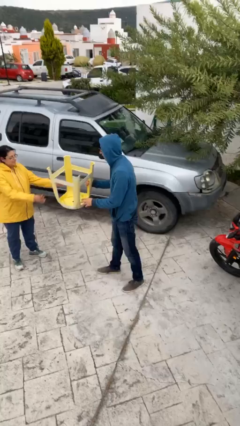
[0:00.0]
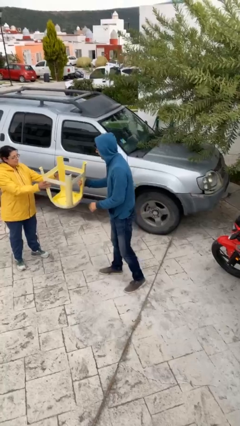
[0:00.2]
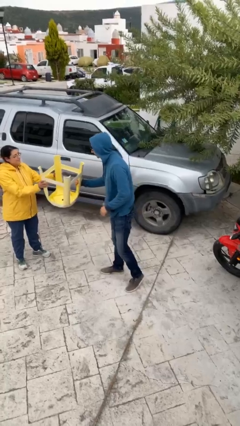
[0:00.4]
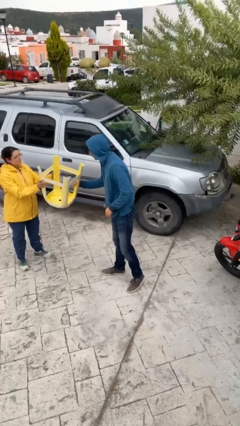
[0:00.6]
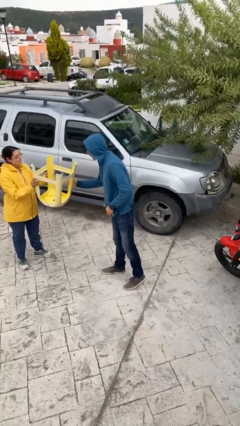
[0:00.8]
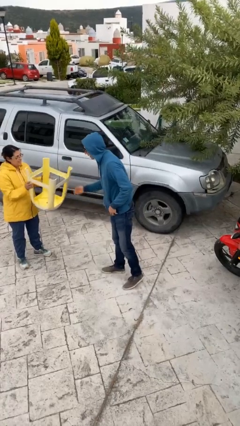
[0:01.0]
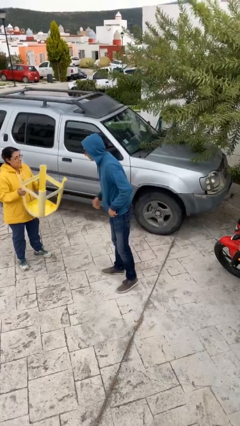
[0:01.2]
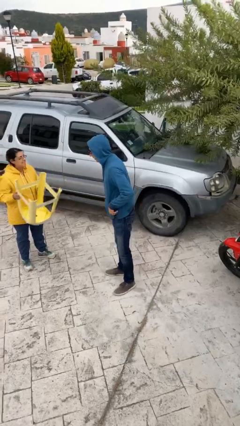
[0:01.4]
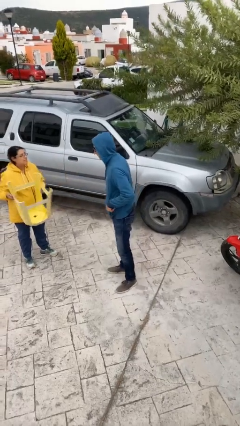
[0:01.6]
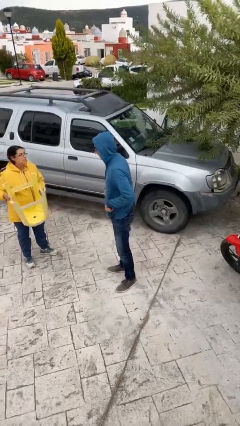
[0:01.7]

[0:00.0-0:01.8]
person transfers object to person

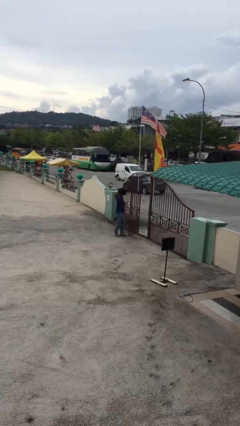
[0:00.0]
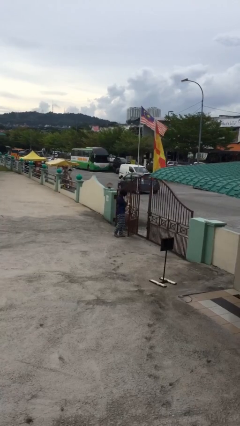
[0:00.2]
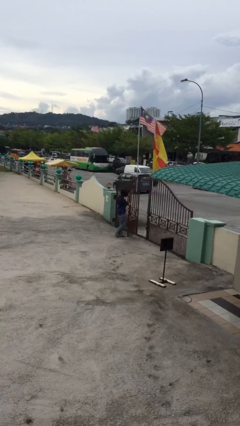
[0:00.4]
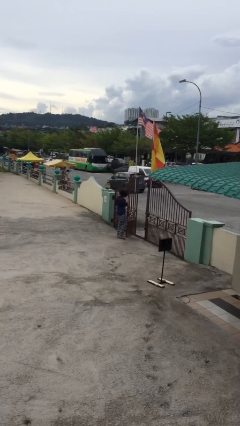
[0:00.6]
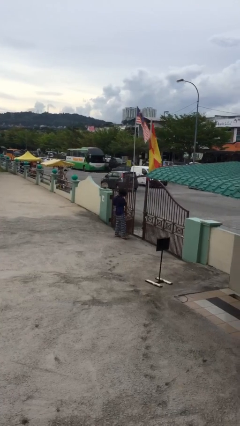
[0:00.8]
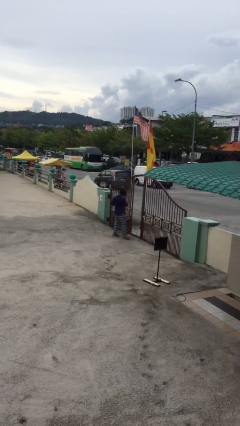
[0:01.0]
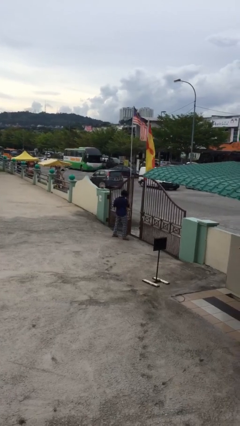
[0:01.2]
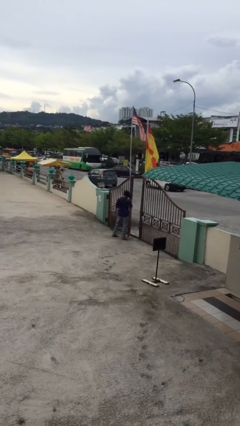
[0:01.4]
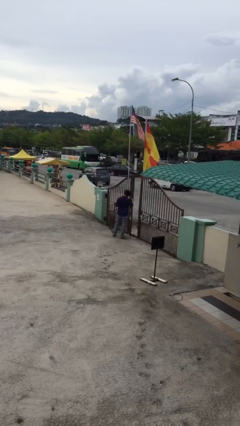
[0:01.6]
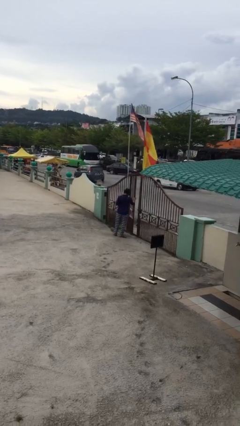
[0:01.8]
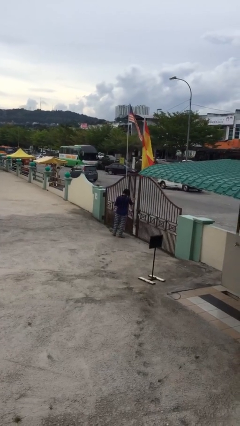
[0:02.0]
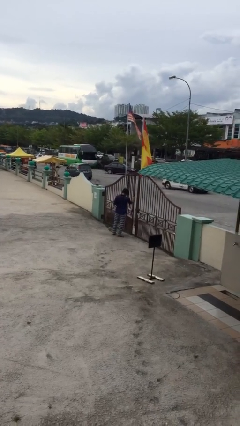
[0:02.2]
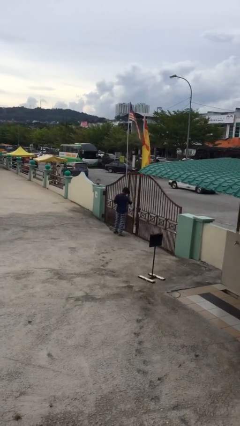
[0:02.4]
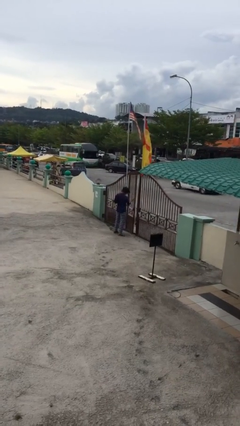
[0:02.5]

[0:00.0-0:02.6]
person closes facility door

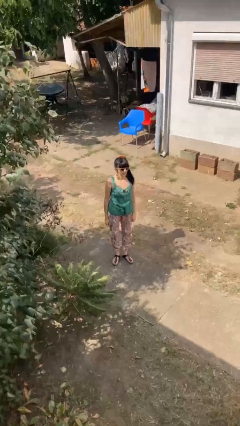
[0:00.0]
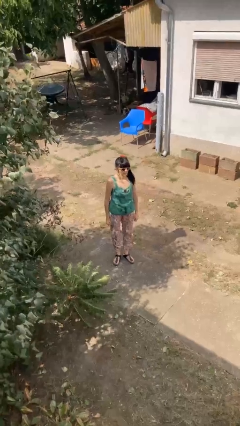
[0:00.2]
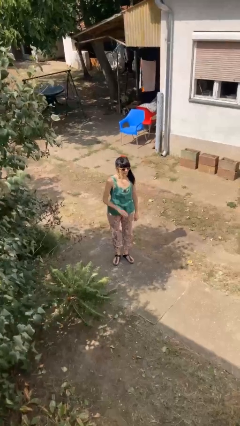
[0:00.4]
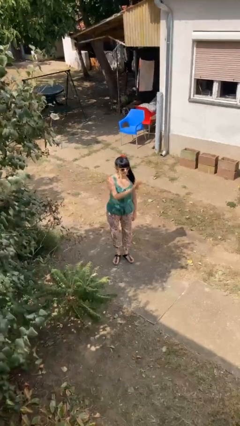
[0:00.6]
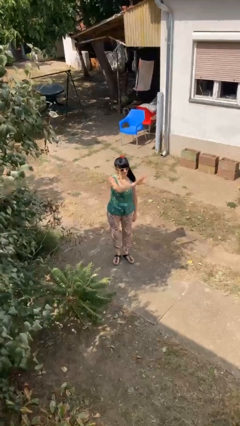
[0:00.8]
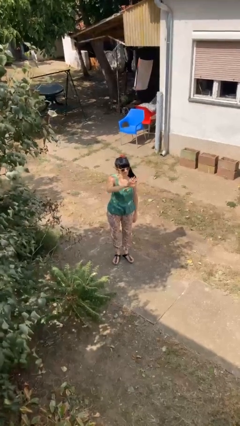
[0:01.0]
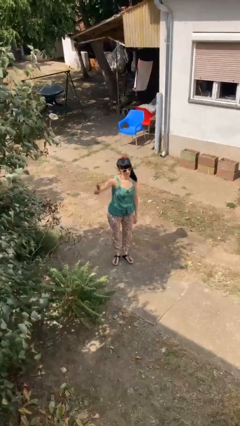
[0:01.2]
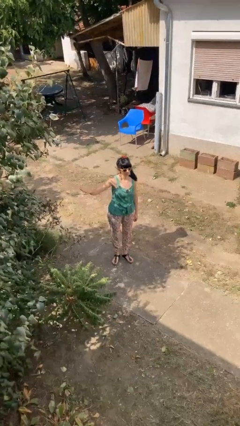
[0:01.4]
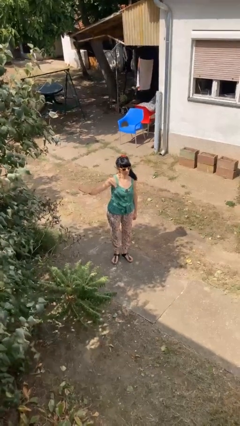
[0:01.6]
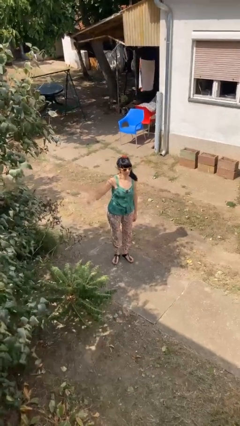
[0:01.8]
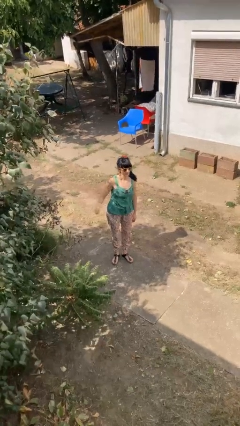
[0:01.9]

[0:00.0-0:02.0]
person gestures swipe right

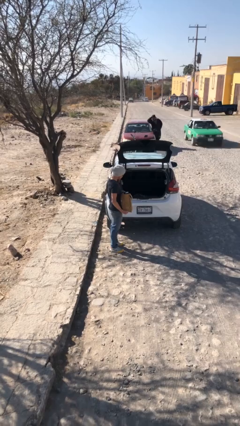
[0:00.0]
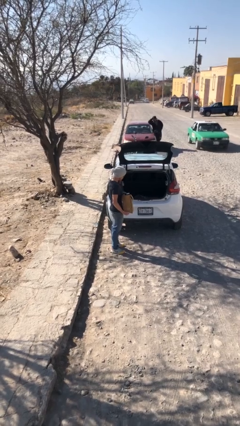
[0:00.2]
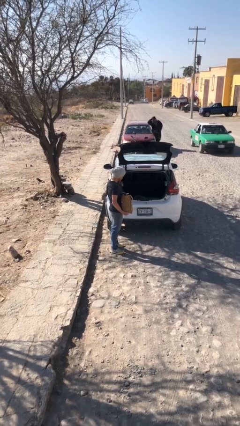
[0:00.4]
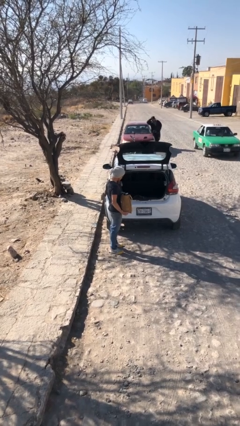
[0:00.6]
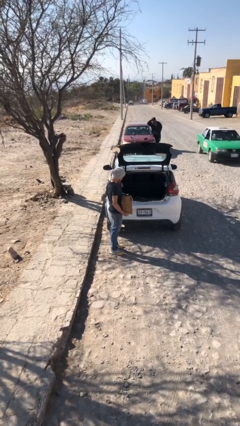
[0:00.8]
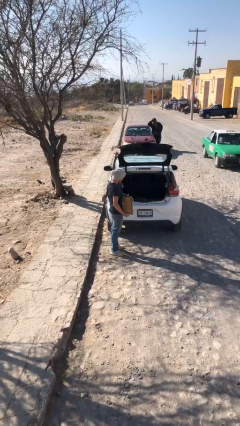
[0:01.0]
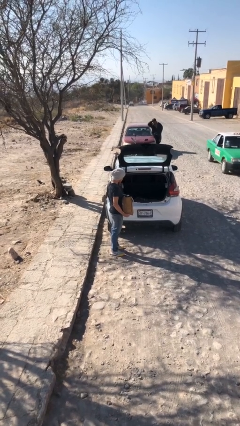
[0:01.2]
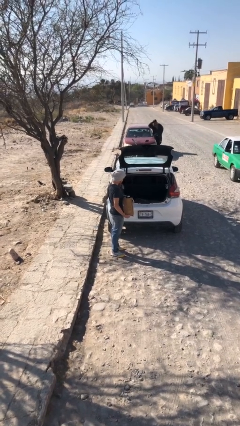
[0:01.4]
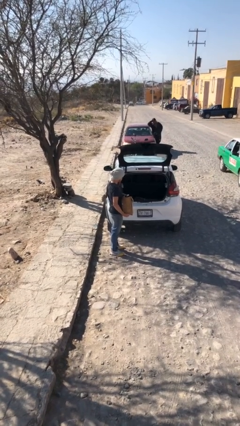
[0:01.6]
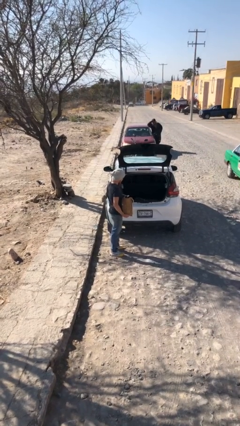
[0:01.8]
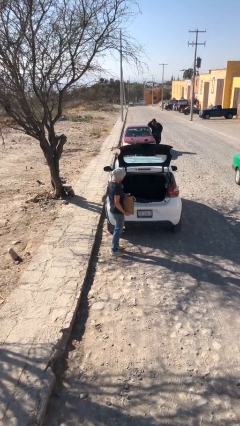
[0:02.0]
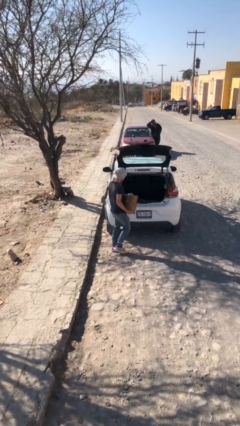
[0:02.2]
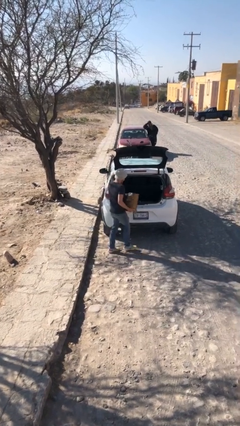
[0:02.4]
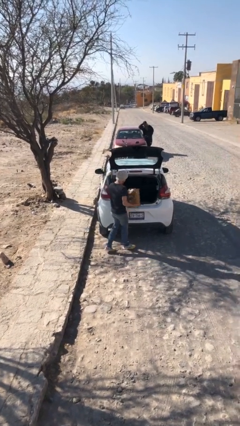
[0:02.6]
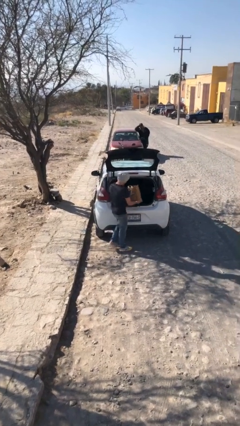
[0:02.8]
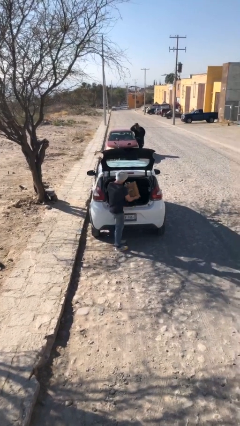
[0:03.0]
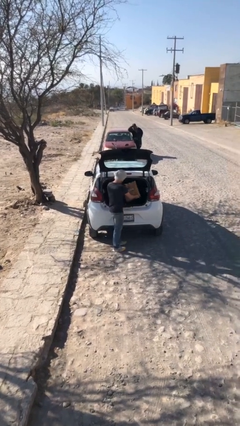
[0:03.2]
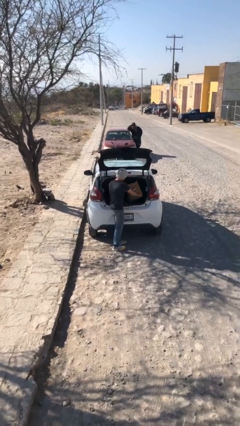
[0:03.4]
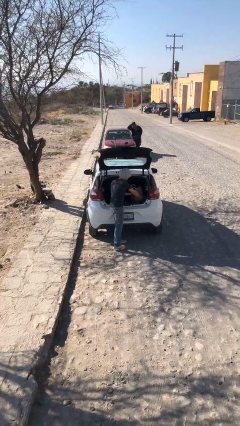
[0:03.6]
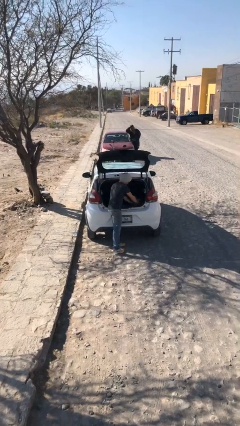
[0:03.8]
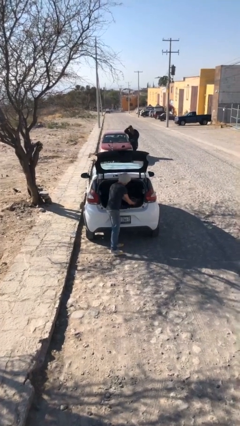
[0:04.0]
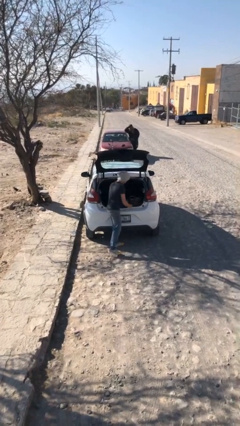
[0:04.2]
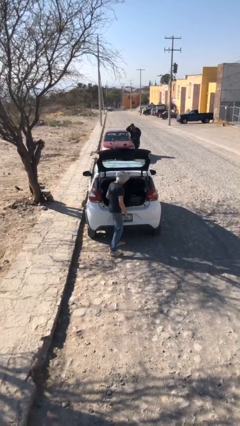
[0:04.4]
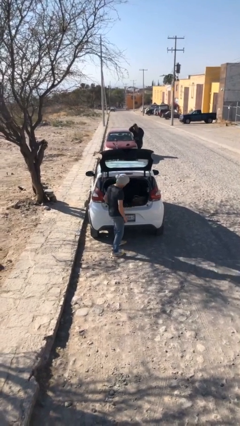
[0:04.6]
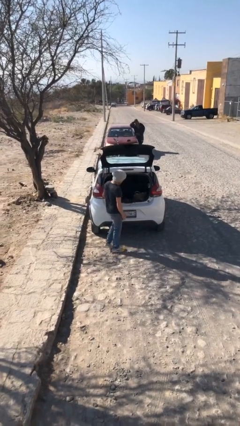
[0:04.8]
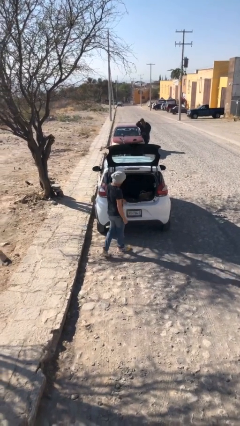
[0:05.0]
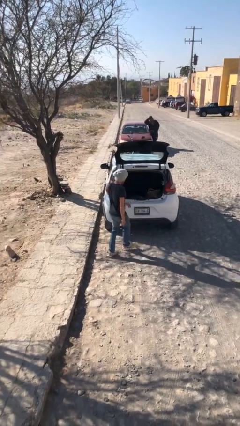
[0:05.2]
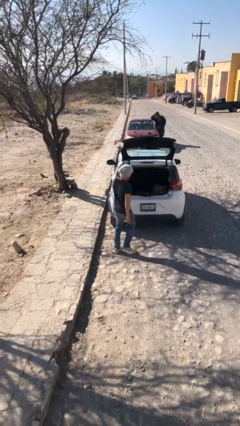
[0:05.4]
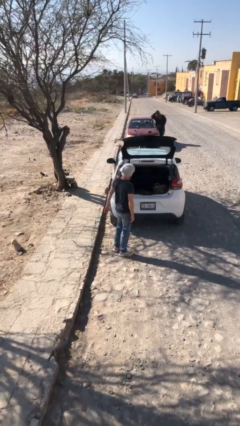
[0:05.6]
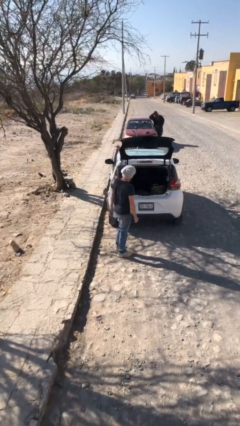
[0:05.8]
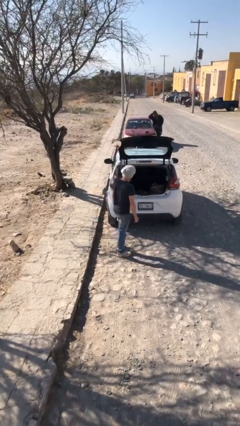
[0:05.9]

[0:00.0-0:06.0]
person loads car

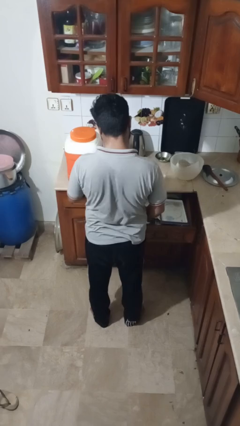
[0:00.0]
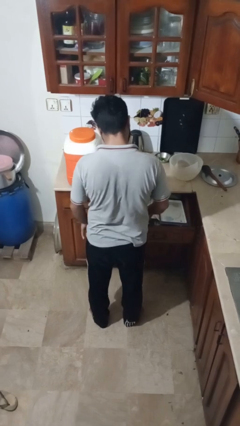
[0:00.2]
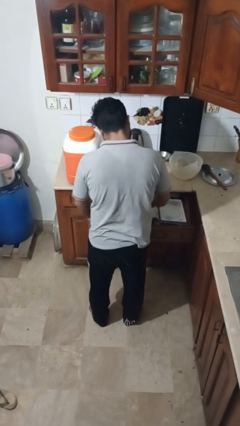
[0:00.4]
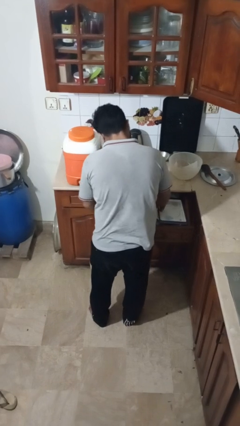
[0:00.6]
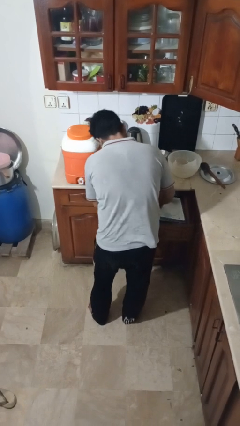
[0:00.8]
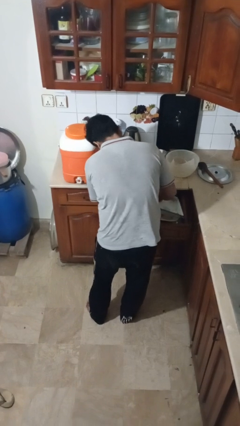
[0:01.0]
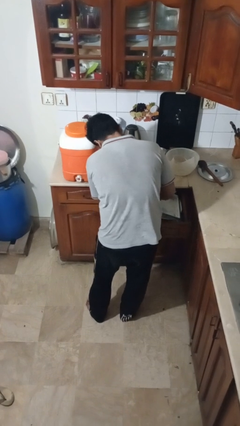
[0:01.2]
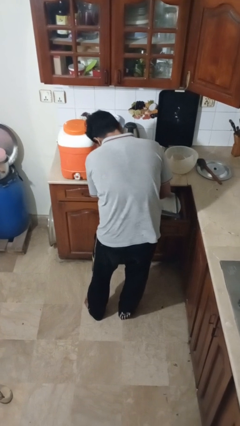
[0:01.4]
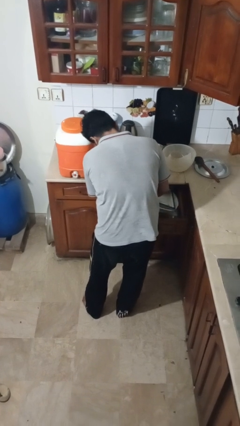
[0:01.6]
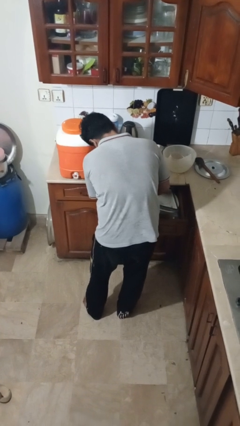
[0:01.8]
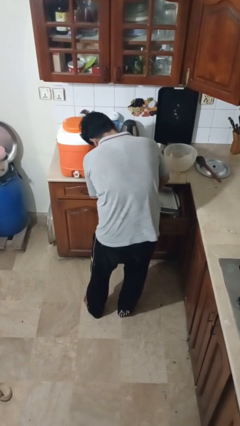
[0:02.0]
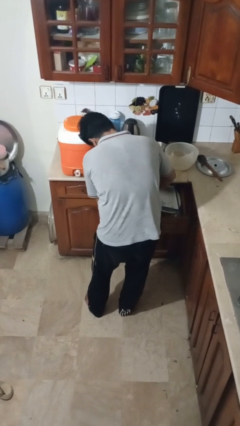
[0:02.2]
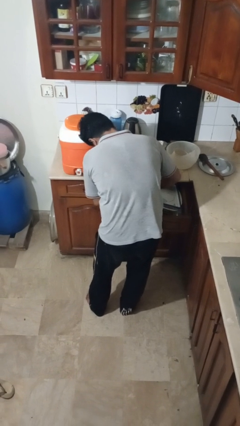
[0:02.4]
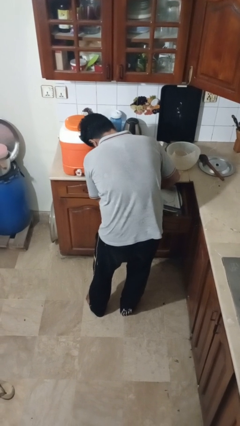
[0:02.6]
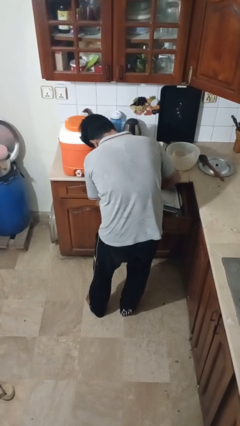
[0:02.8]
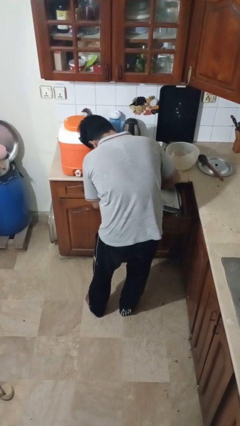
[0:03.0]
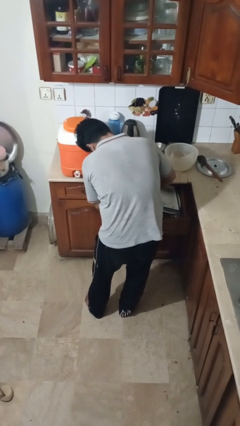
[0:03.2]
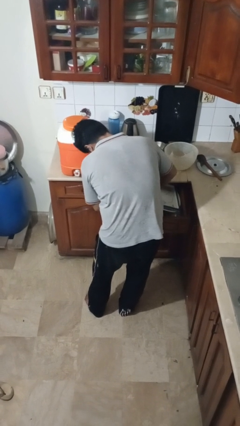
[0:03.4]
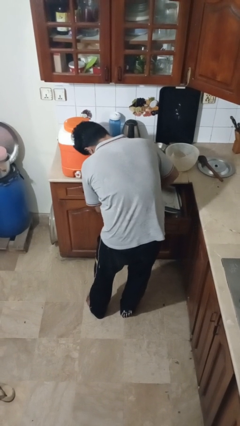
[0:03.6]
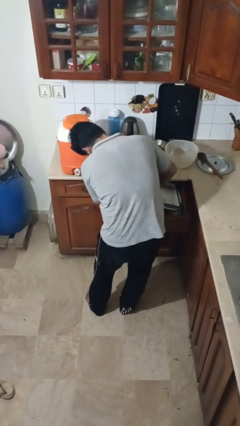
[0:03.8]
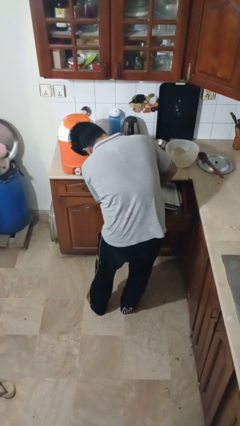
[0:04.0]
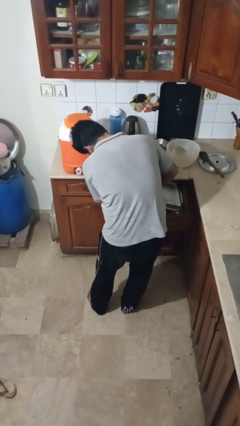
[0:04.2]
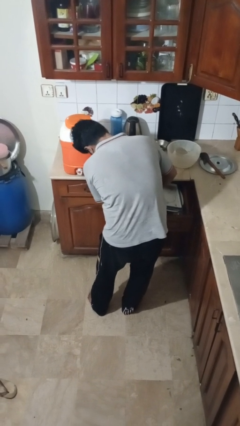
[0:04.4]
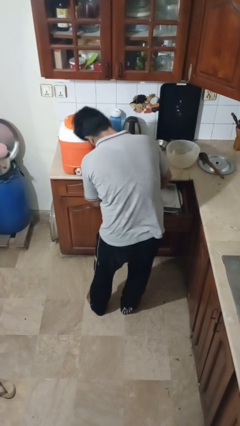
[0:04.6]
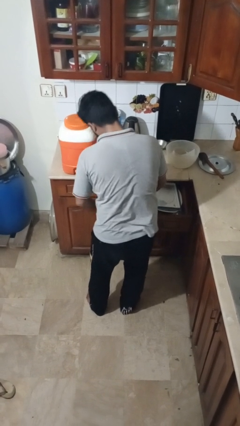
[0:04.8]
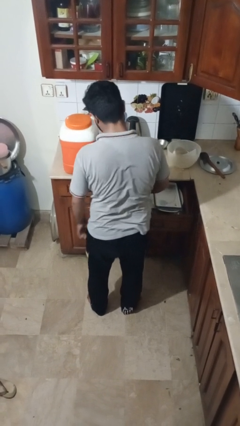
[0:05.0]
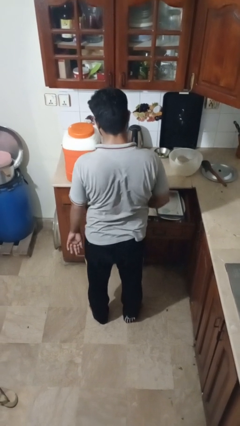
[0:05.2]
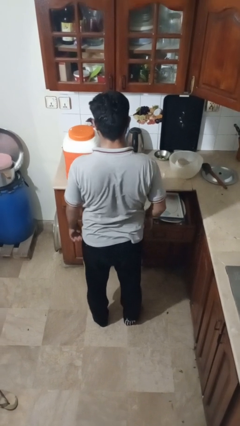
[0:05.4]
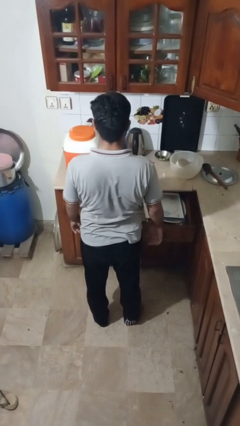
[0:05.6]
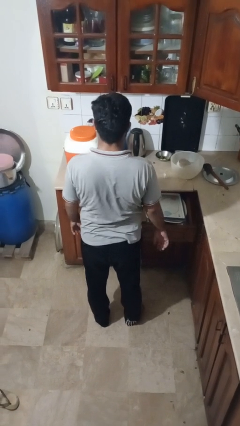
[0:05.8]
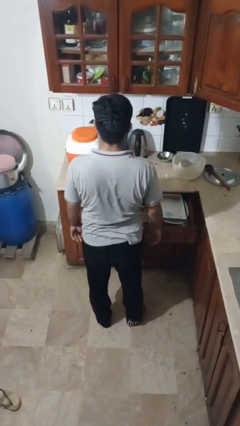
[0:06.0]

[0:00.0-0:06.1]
person searches in kitchen drawer
